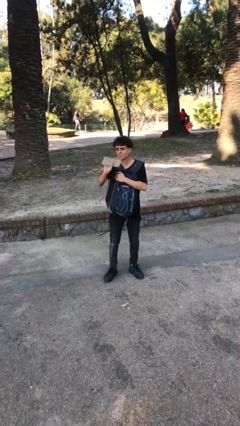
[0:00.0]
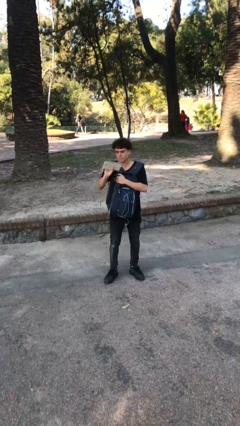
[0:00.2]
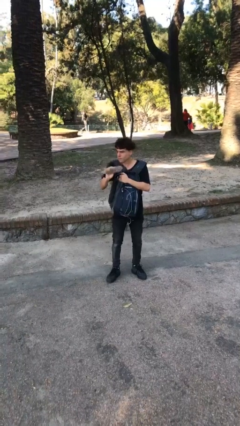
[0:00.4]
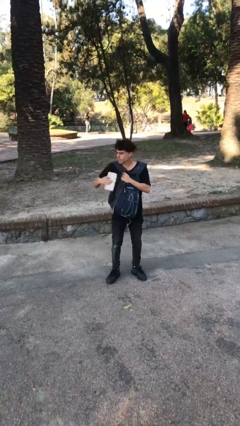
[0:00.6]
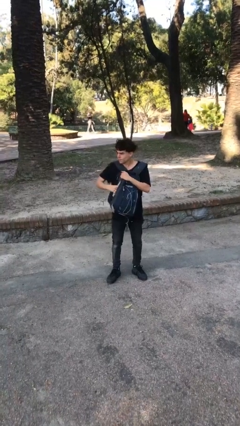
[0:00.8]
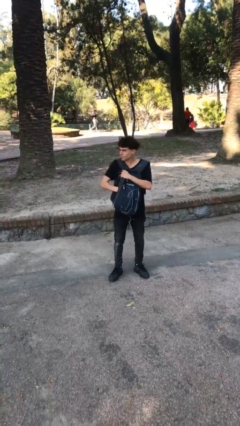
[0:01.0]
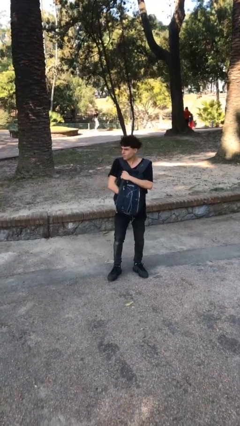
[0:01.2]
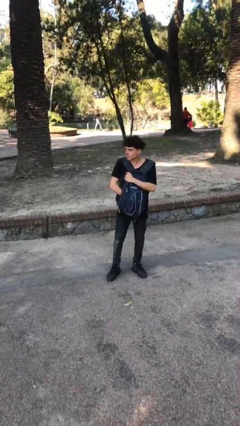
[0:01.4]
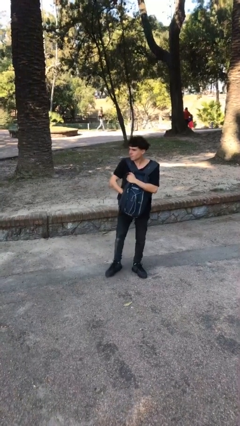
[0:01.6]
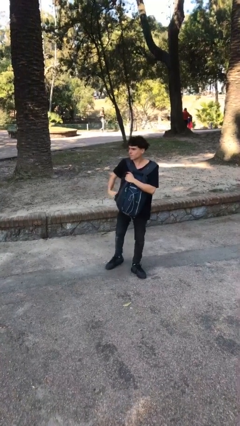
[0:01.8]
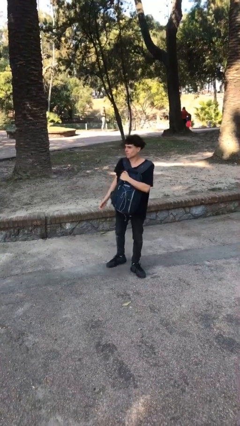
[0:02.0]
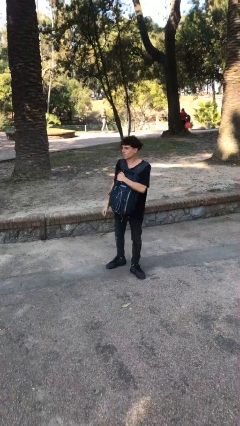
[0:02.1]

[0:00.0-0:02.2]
person puts object into backpack

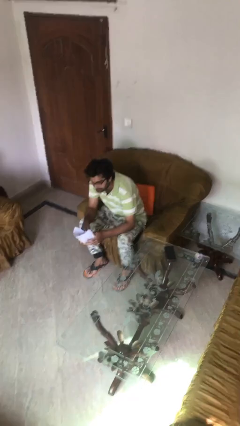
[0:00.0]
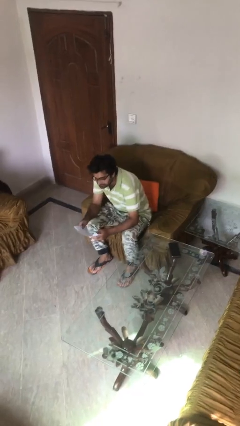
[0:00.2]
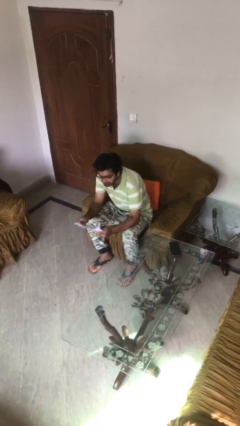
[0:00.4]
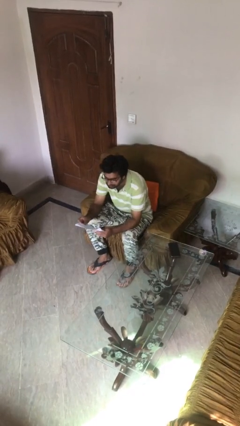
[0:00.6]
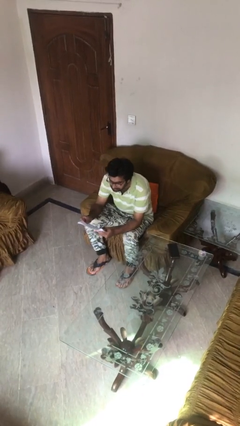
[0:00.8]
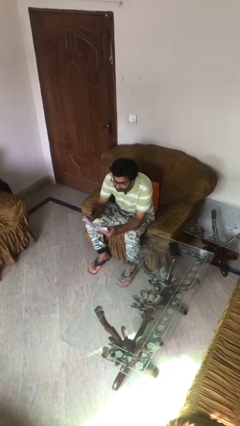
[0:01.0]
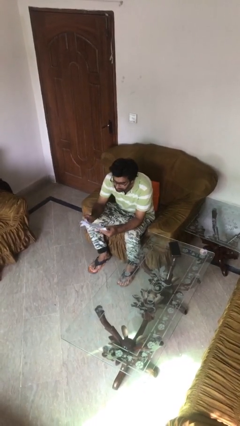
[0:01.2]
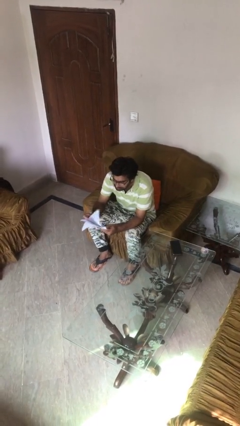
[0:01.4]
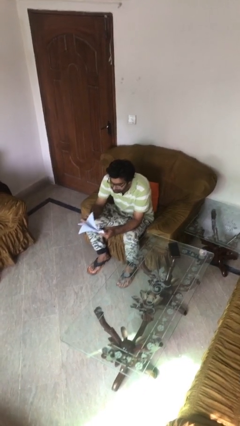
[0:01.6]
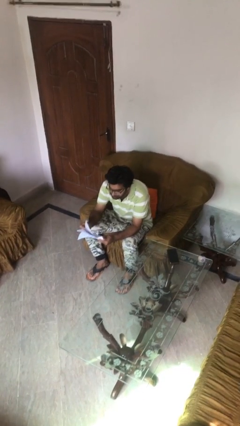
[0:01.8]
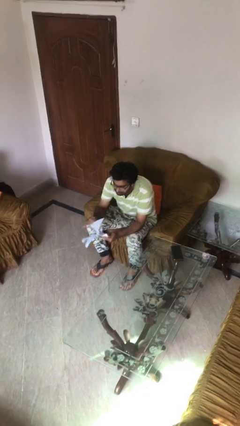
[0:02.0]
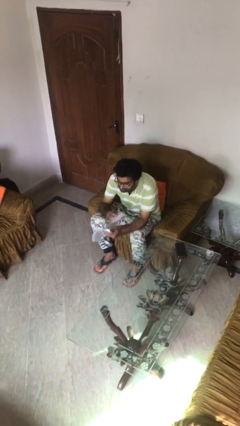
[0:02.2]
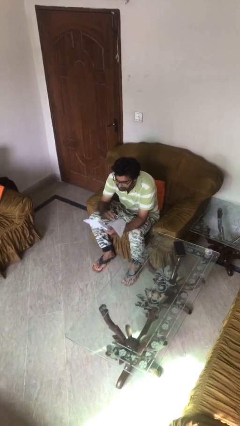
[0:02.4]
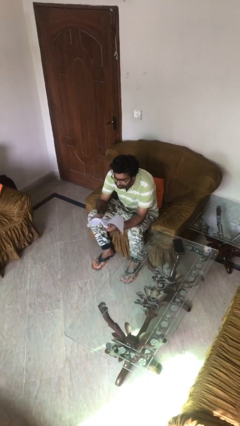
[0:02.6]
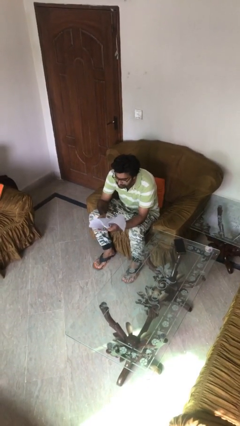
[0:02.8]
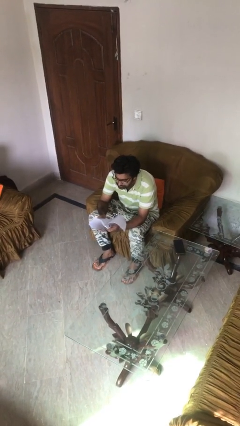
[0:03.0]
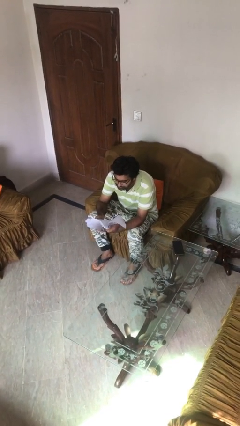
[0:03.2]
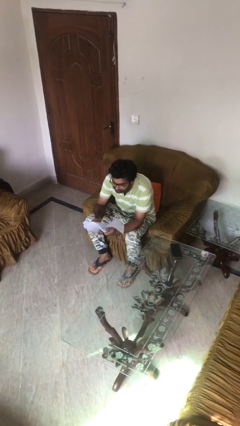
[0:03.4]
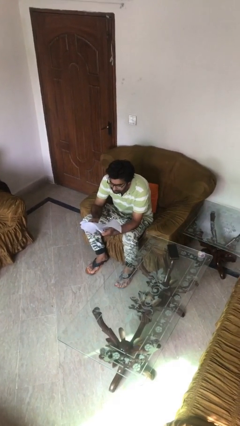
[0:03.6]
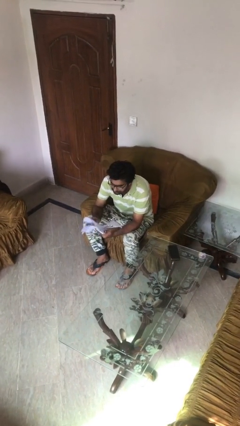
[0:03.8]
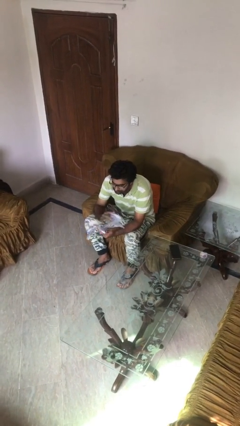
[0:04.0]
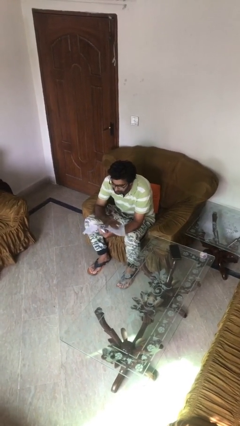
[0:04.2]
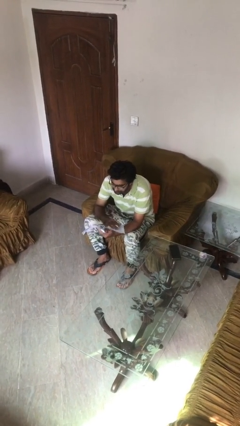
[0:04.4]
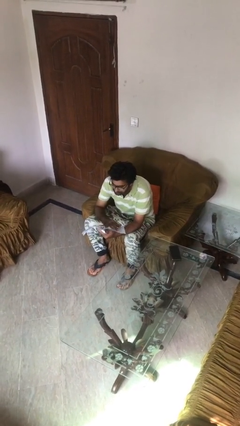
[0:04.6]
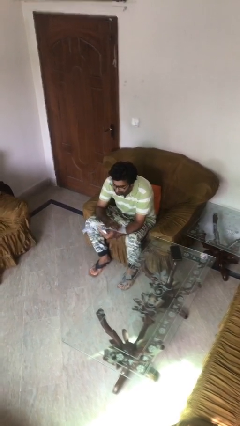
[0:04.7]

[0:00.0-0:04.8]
person reads document

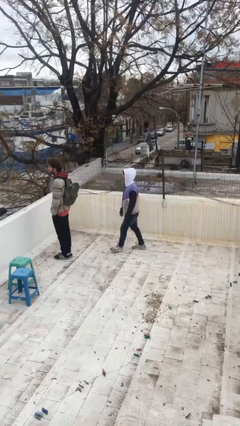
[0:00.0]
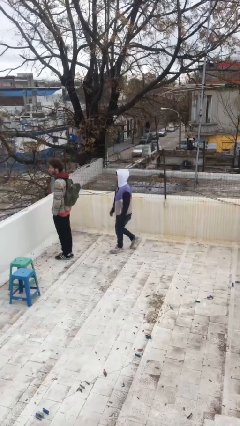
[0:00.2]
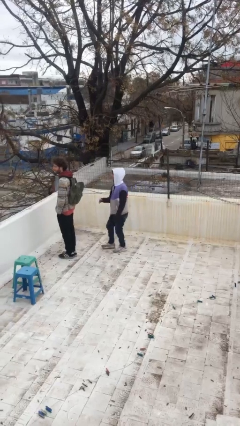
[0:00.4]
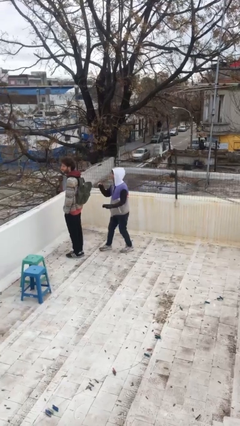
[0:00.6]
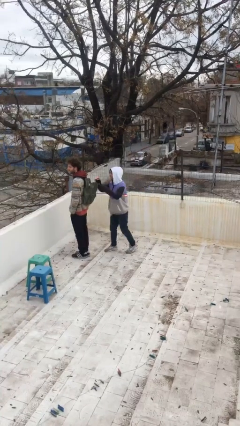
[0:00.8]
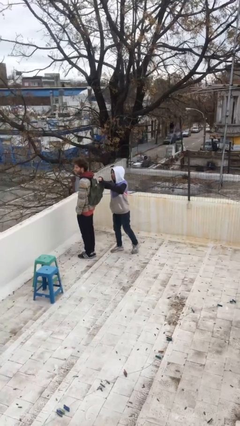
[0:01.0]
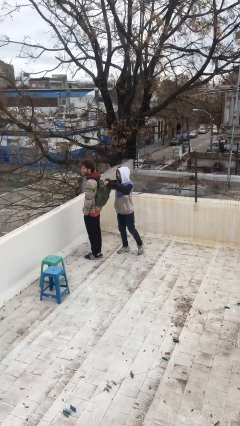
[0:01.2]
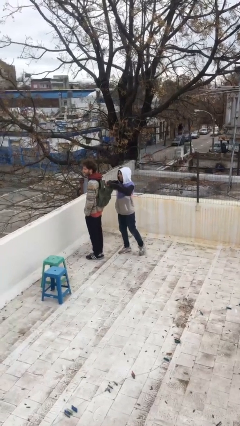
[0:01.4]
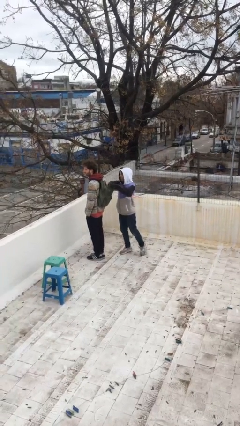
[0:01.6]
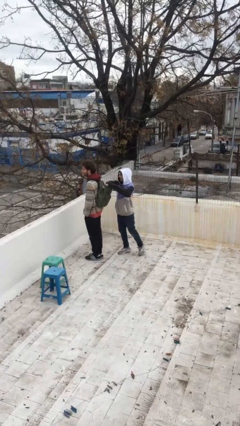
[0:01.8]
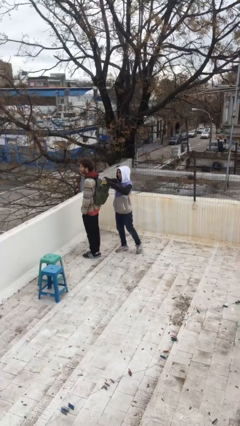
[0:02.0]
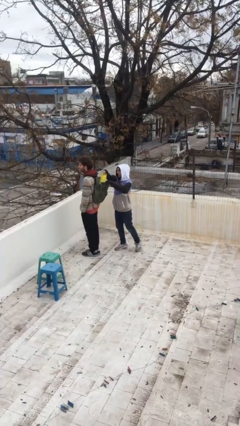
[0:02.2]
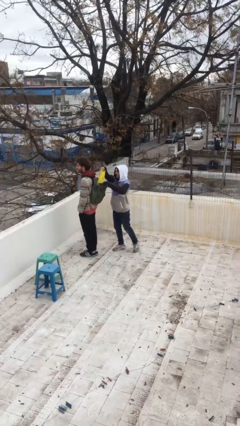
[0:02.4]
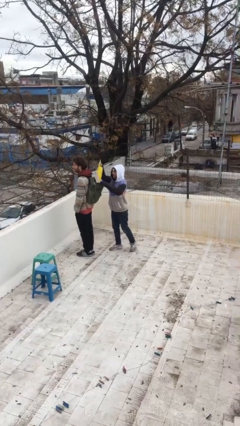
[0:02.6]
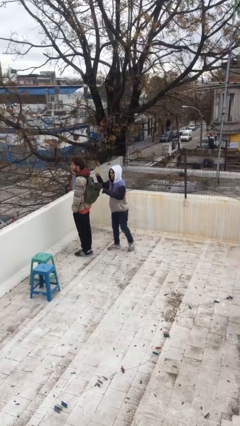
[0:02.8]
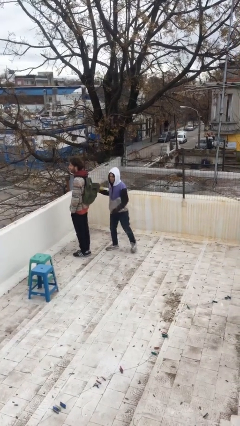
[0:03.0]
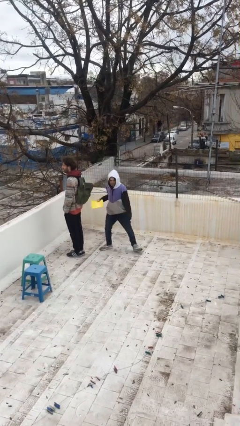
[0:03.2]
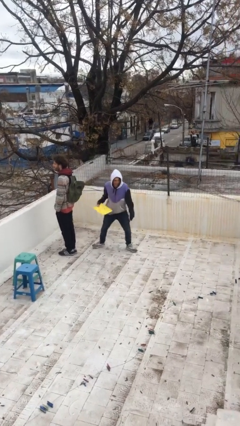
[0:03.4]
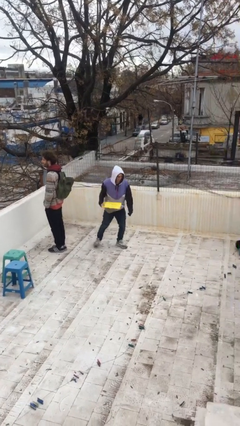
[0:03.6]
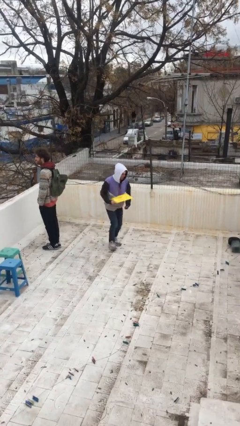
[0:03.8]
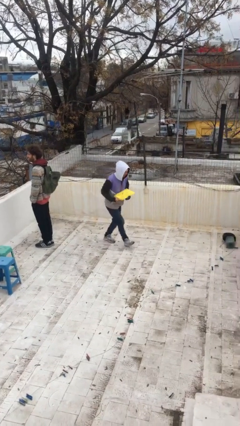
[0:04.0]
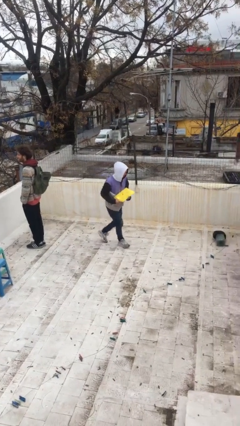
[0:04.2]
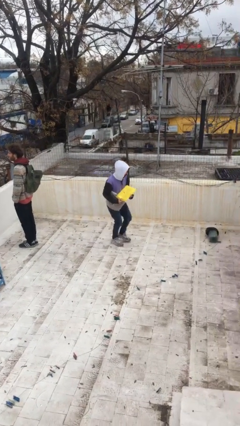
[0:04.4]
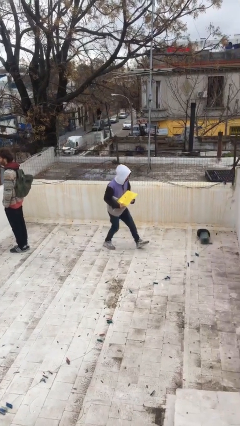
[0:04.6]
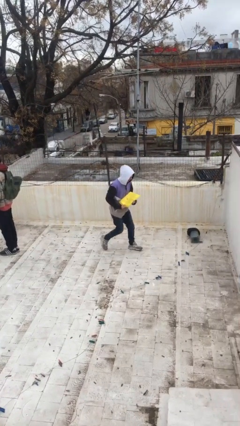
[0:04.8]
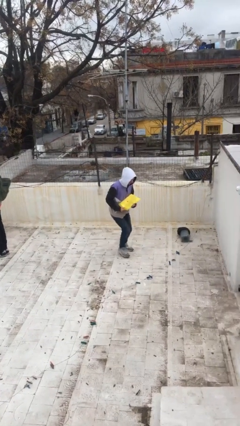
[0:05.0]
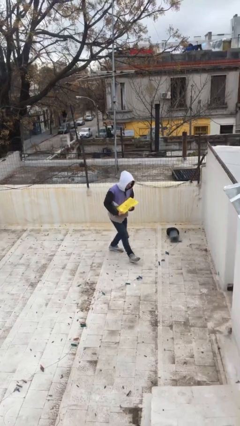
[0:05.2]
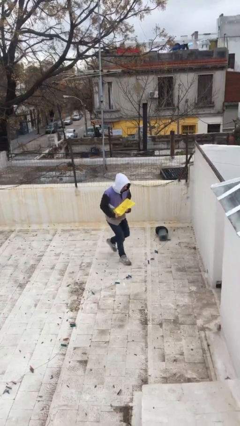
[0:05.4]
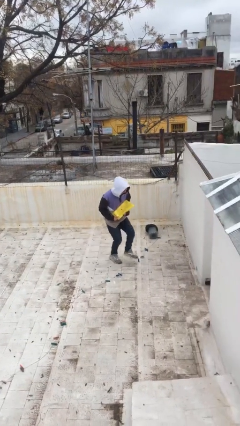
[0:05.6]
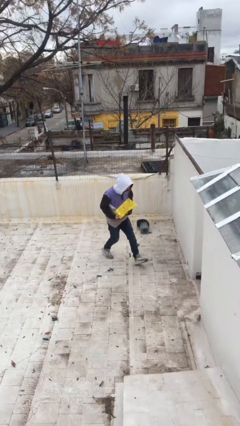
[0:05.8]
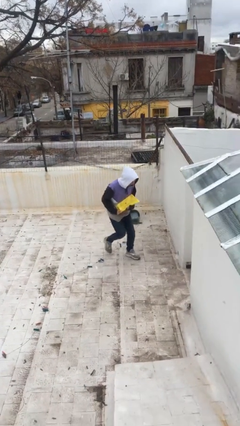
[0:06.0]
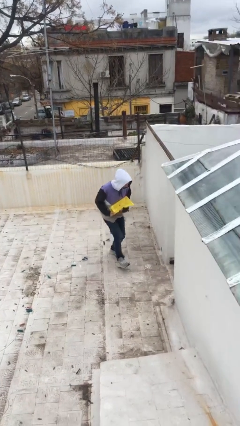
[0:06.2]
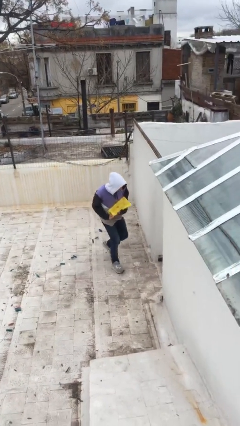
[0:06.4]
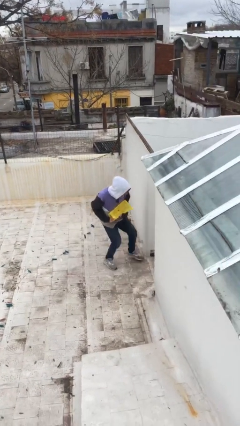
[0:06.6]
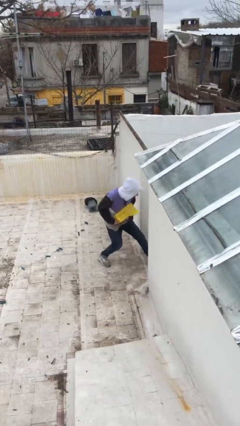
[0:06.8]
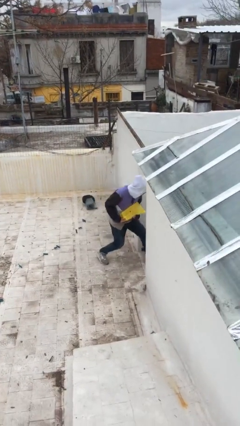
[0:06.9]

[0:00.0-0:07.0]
person steals object from person

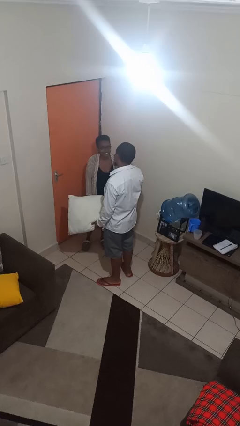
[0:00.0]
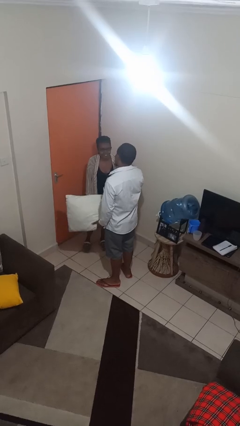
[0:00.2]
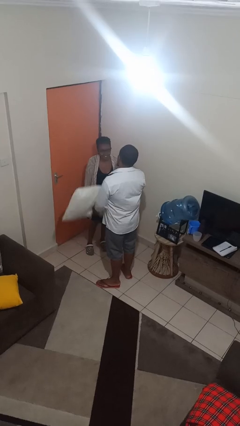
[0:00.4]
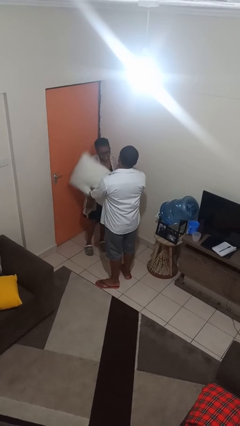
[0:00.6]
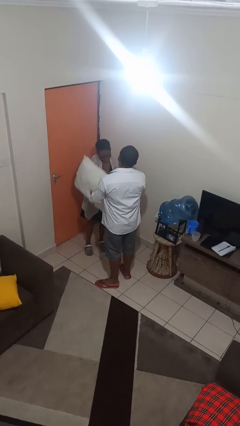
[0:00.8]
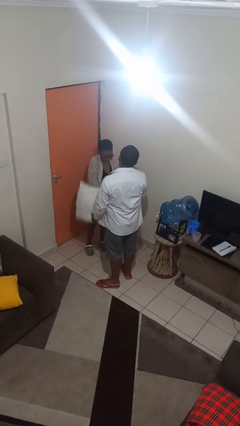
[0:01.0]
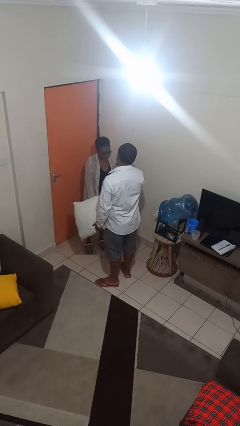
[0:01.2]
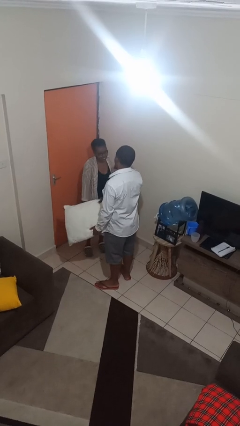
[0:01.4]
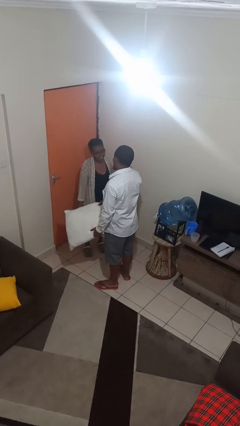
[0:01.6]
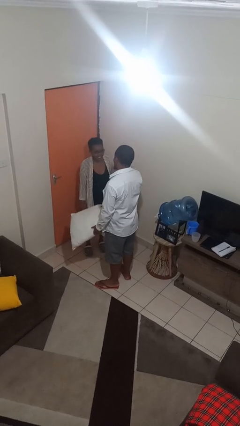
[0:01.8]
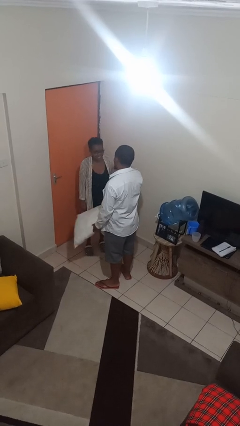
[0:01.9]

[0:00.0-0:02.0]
person hits person with pillow

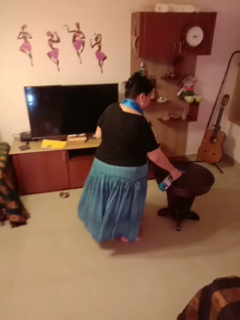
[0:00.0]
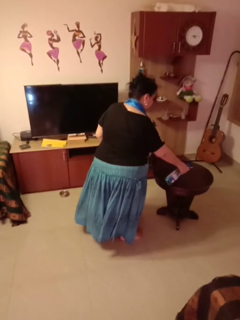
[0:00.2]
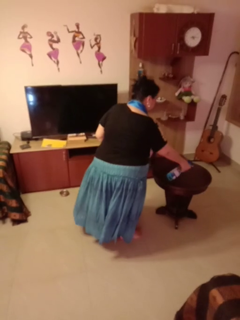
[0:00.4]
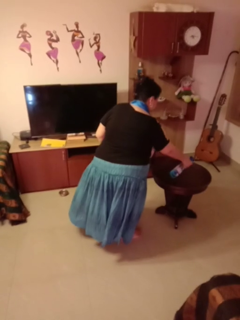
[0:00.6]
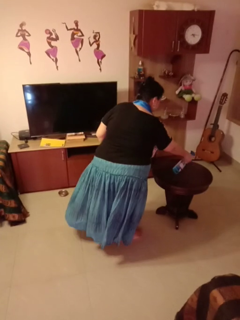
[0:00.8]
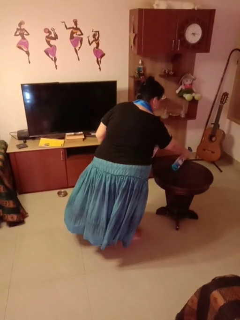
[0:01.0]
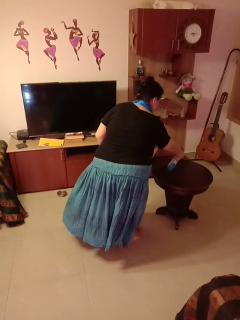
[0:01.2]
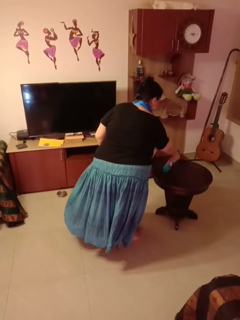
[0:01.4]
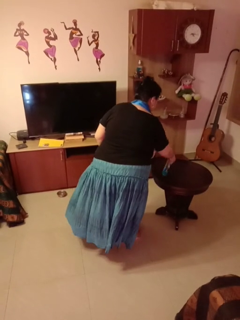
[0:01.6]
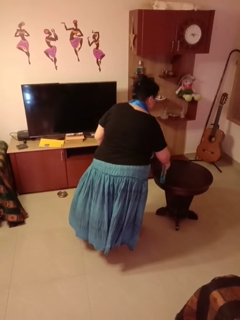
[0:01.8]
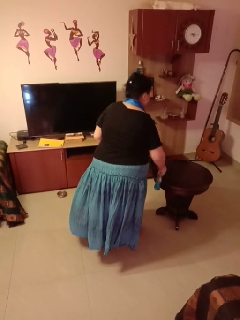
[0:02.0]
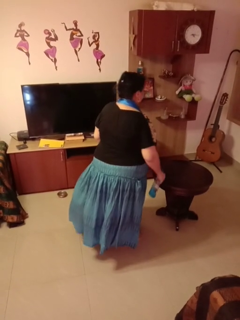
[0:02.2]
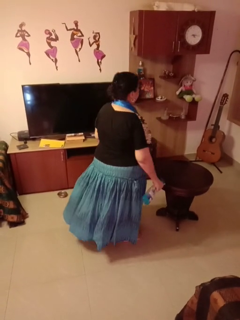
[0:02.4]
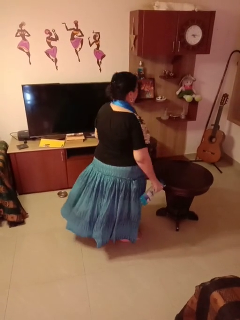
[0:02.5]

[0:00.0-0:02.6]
person sprays from bottle
